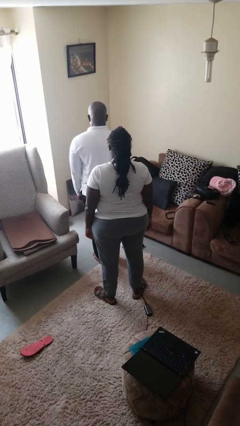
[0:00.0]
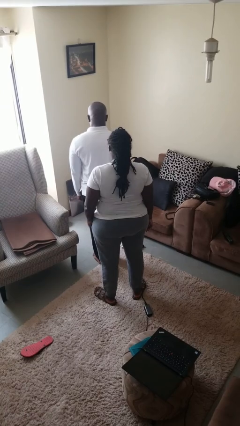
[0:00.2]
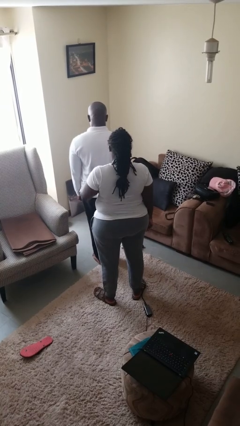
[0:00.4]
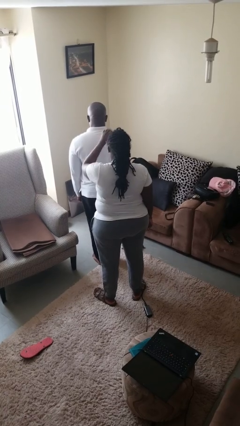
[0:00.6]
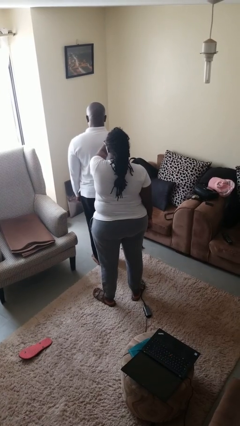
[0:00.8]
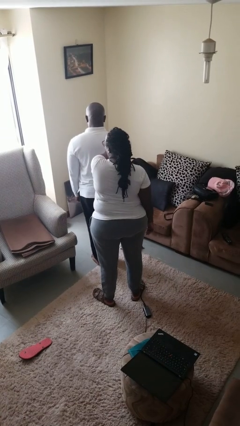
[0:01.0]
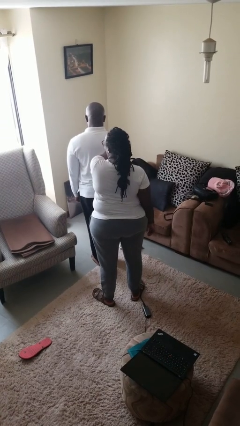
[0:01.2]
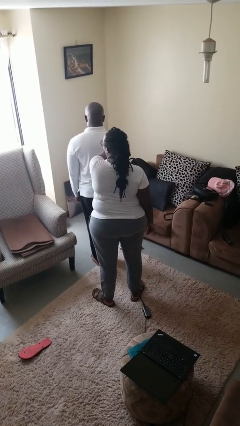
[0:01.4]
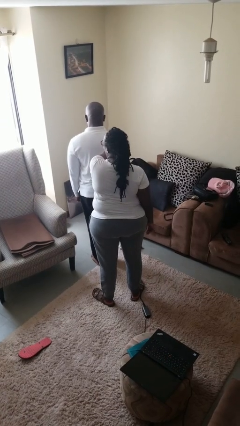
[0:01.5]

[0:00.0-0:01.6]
person grabs person by shoulder

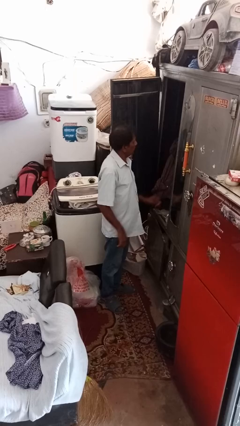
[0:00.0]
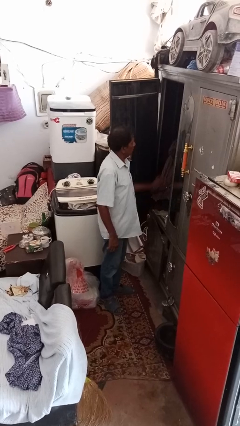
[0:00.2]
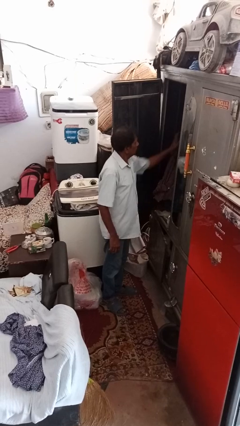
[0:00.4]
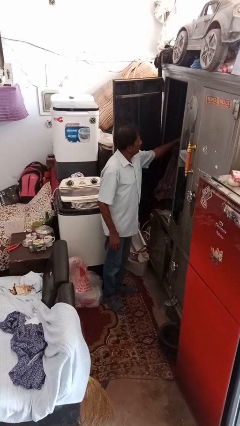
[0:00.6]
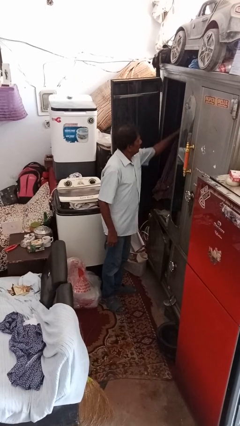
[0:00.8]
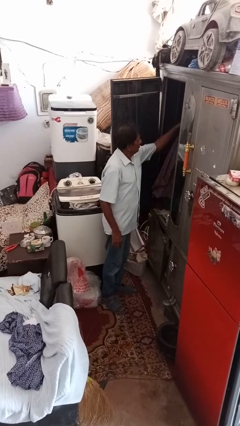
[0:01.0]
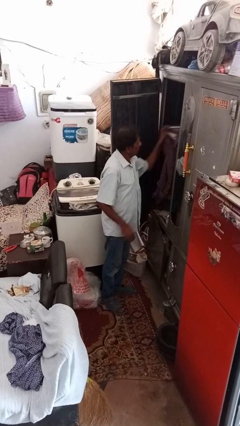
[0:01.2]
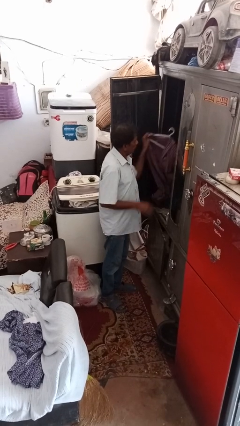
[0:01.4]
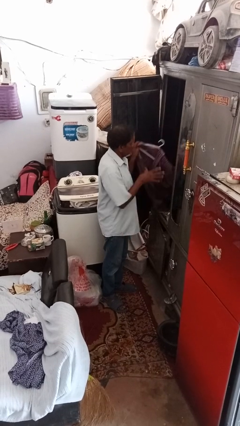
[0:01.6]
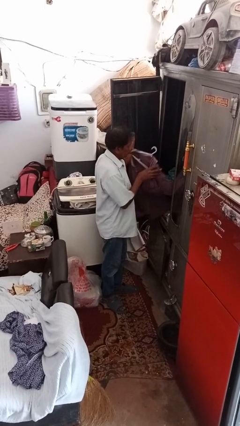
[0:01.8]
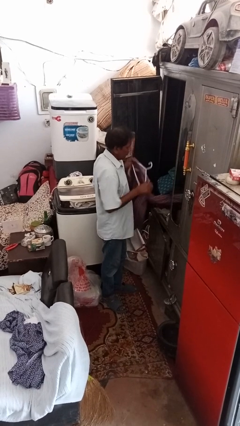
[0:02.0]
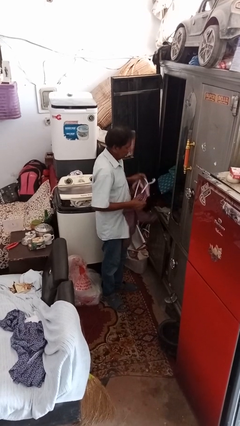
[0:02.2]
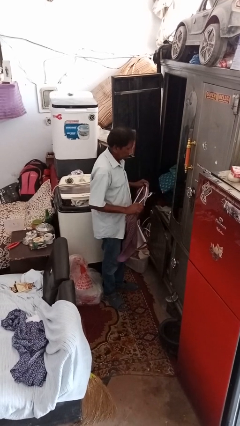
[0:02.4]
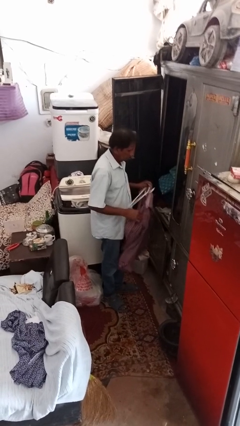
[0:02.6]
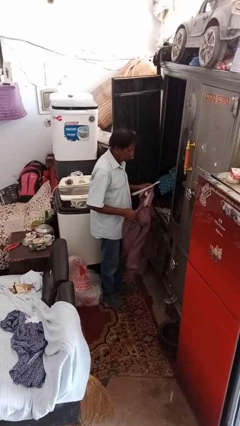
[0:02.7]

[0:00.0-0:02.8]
person takes clothes from closet

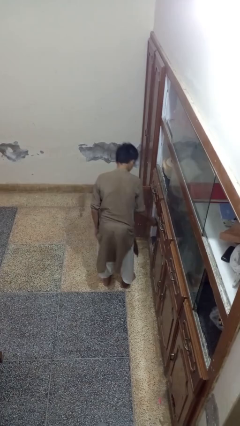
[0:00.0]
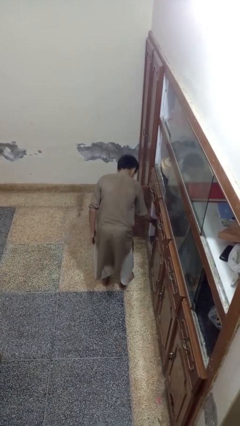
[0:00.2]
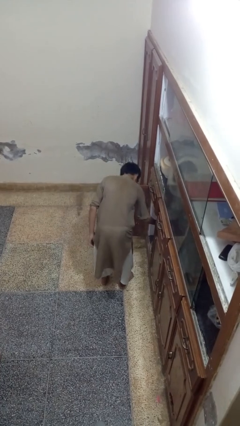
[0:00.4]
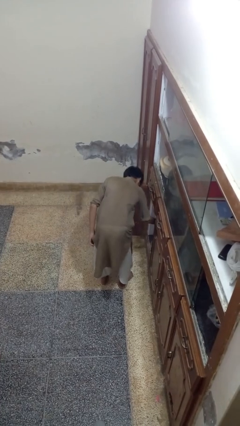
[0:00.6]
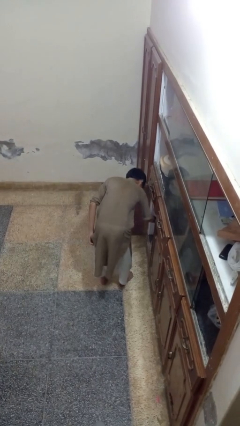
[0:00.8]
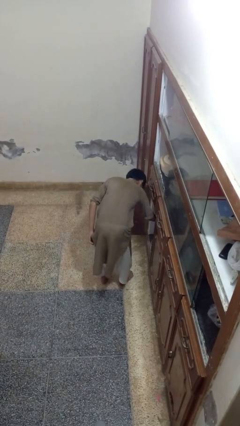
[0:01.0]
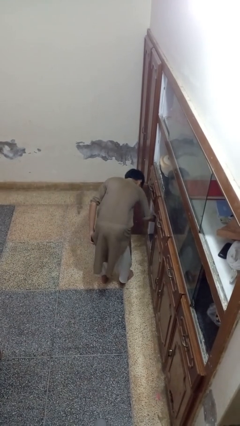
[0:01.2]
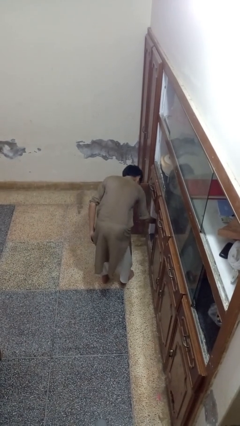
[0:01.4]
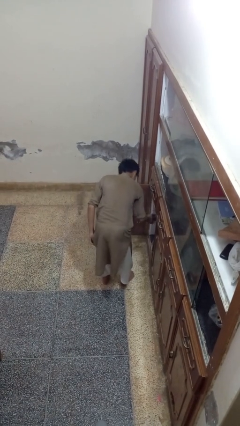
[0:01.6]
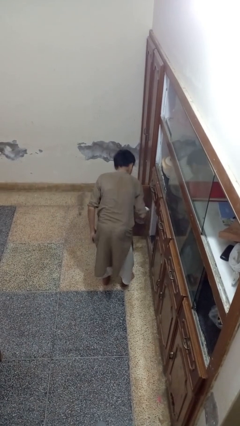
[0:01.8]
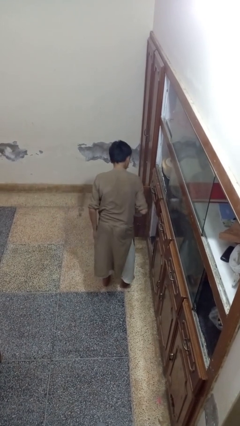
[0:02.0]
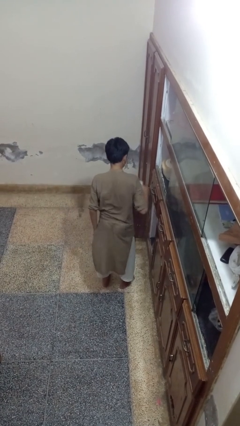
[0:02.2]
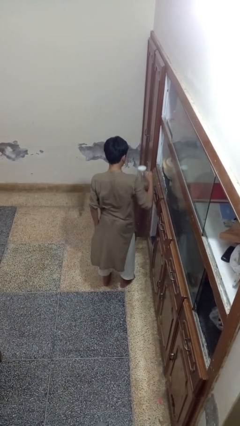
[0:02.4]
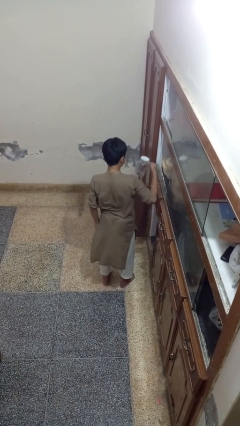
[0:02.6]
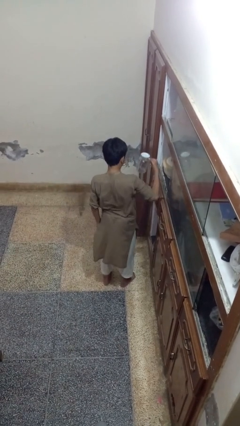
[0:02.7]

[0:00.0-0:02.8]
person takes object from cabinet

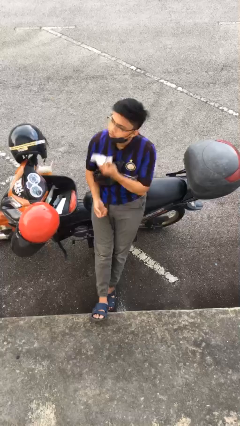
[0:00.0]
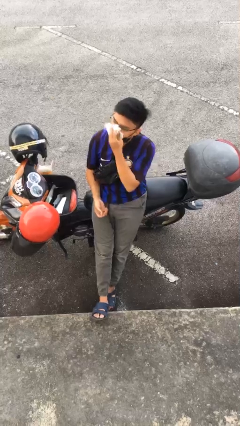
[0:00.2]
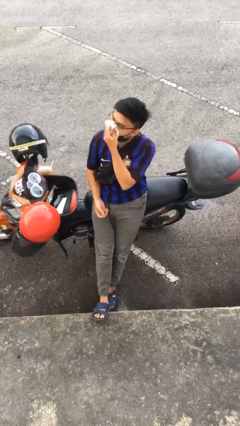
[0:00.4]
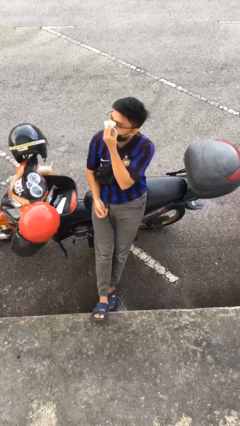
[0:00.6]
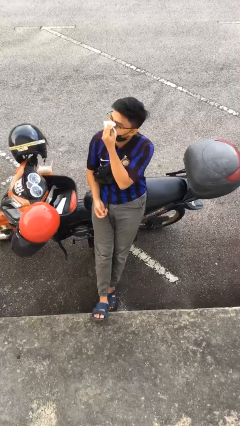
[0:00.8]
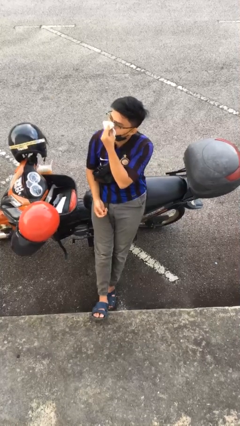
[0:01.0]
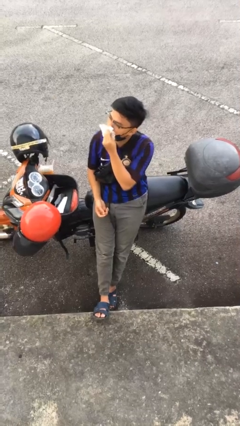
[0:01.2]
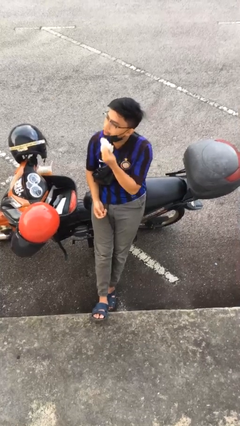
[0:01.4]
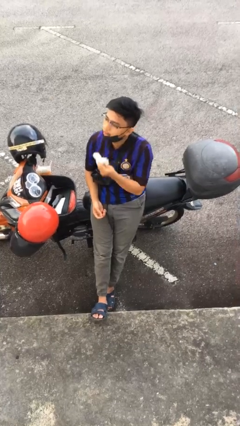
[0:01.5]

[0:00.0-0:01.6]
person blows nose

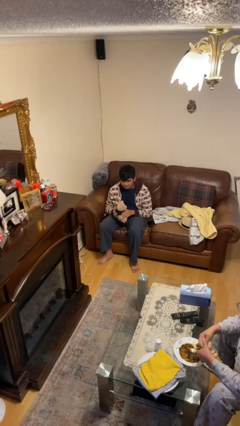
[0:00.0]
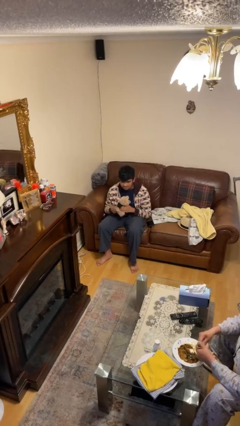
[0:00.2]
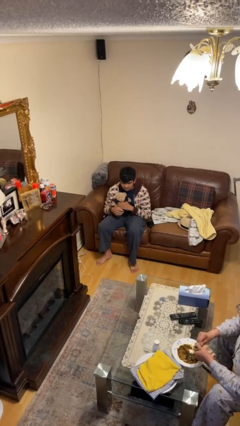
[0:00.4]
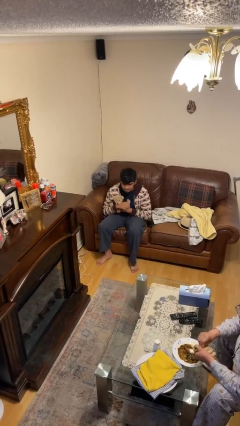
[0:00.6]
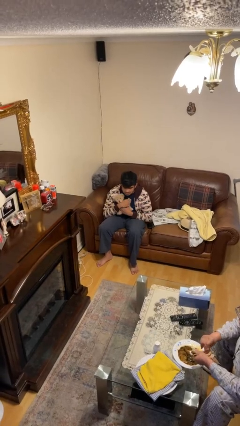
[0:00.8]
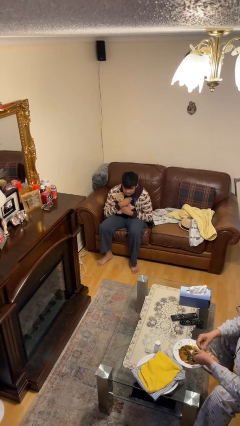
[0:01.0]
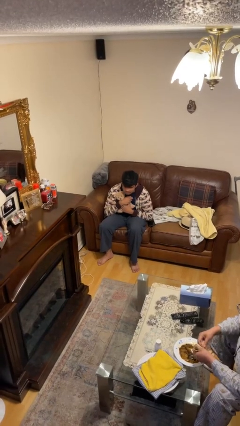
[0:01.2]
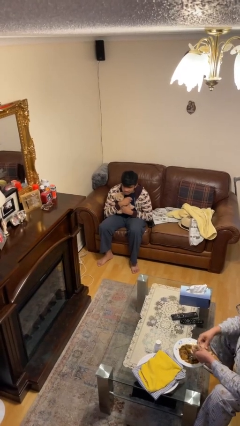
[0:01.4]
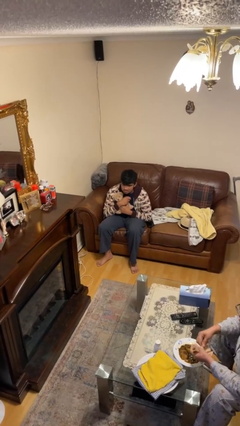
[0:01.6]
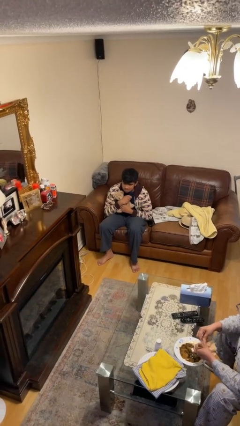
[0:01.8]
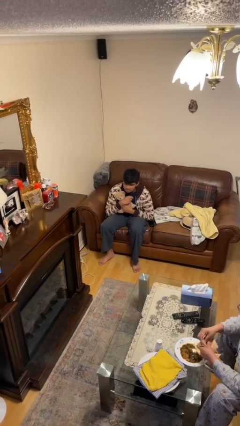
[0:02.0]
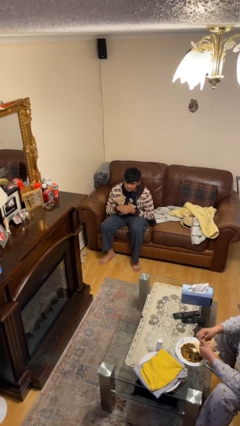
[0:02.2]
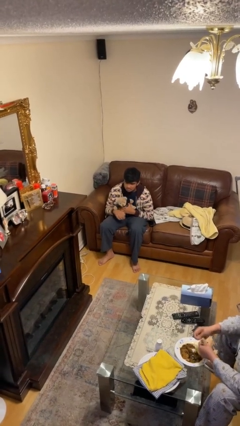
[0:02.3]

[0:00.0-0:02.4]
person hugs stuffed animal

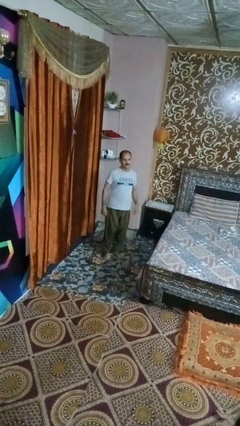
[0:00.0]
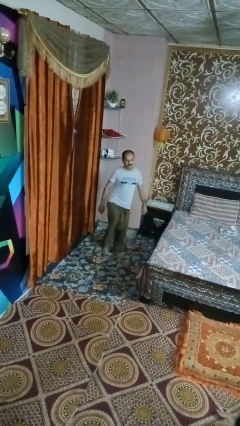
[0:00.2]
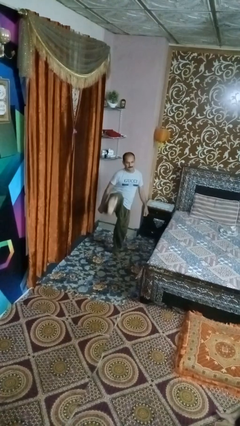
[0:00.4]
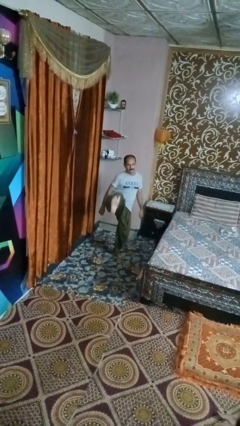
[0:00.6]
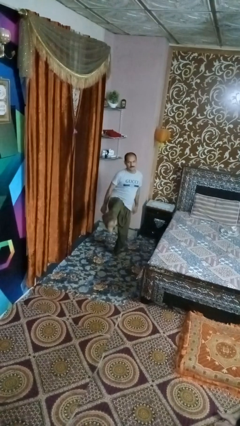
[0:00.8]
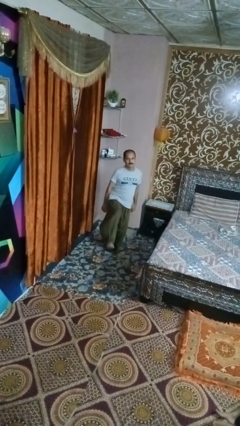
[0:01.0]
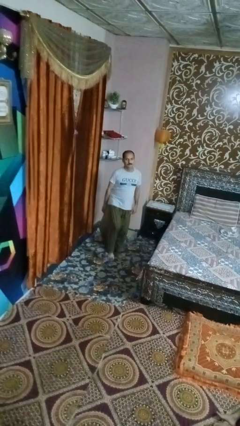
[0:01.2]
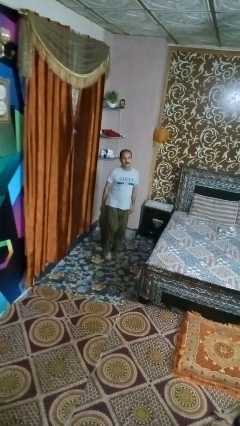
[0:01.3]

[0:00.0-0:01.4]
person karate kicks

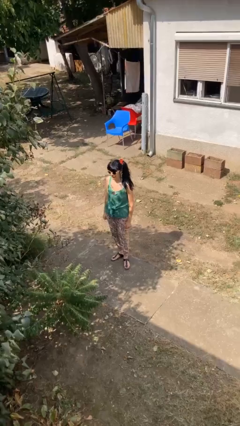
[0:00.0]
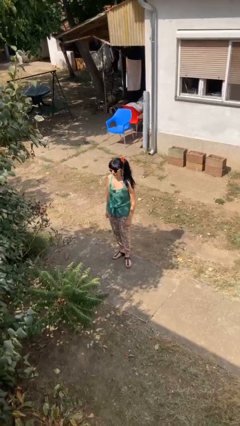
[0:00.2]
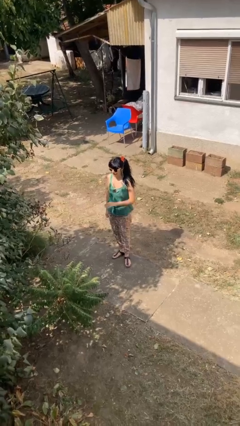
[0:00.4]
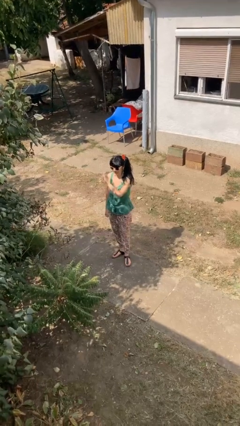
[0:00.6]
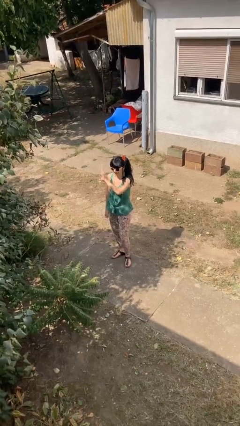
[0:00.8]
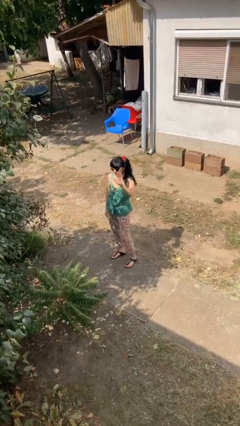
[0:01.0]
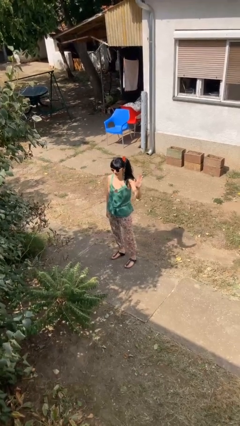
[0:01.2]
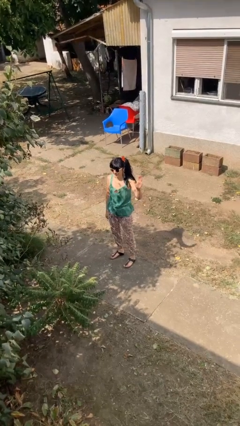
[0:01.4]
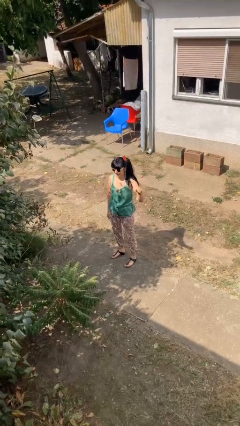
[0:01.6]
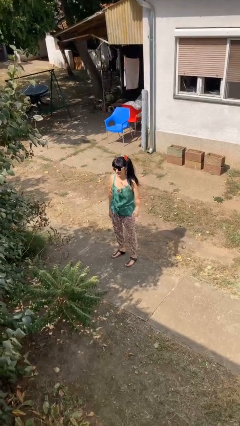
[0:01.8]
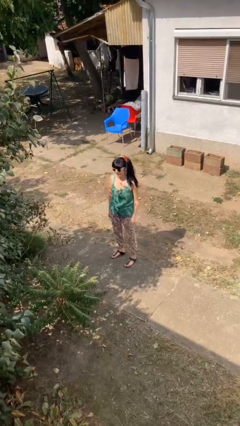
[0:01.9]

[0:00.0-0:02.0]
person gestures swipe left

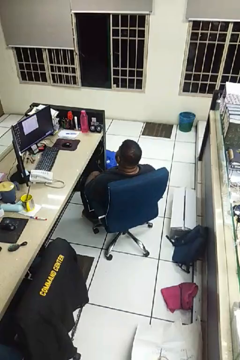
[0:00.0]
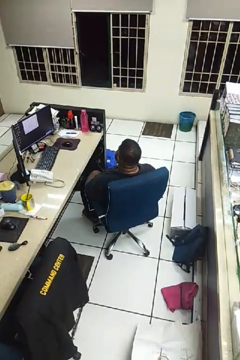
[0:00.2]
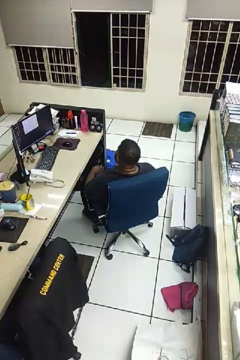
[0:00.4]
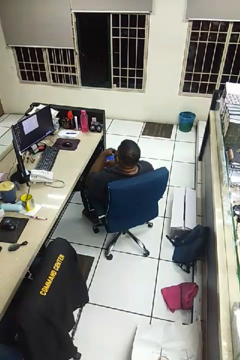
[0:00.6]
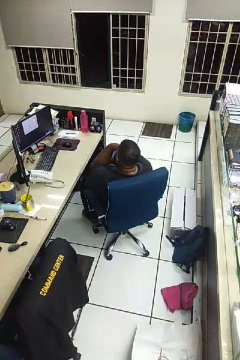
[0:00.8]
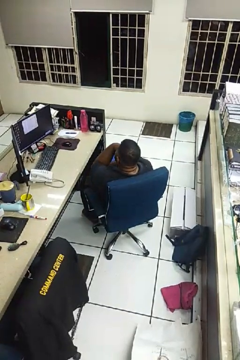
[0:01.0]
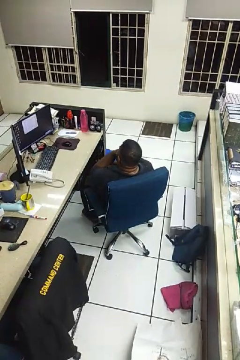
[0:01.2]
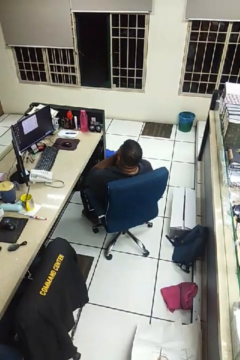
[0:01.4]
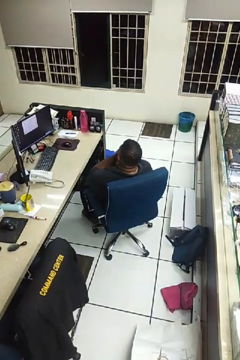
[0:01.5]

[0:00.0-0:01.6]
person strokes chin

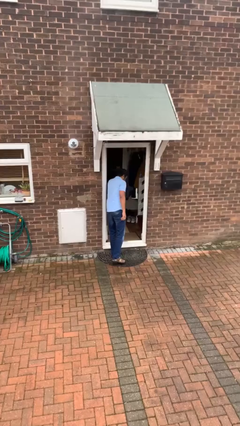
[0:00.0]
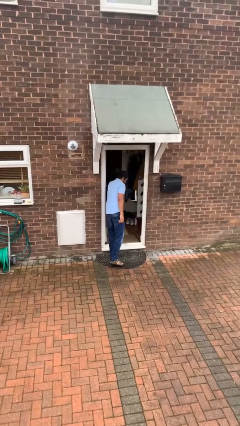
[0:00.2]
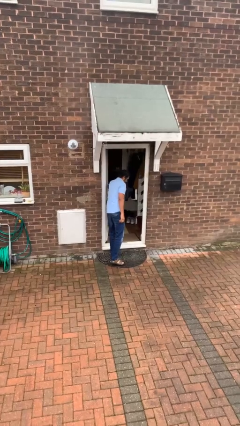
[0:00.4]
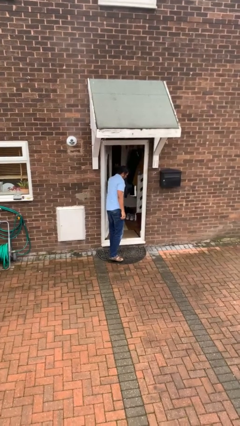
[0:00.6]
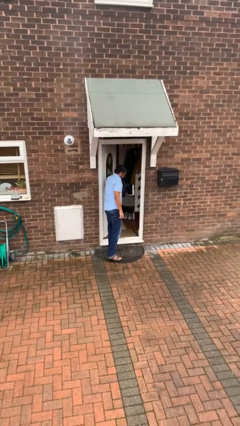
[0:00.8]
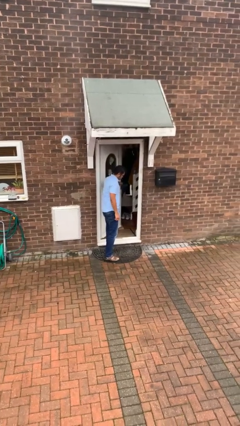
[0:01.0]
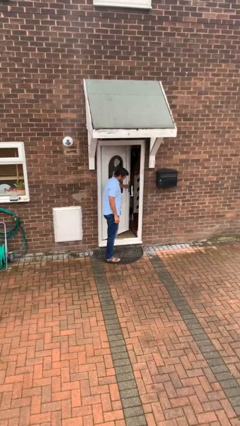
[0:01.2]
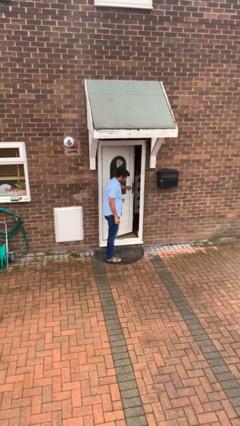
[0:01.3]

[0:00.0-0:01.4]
person closes facility door
